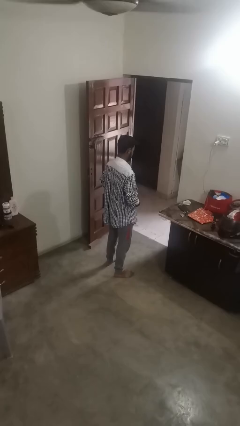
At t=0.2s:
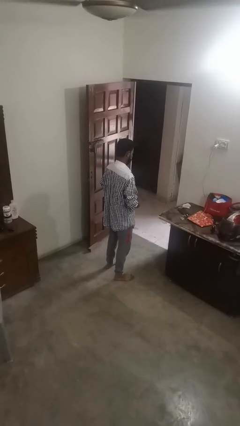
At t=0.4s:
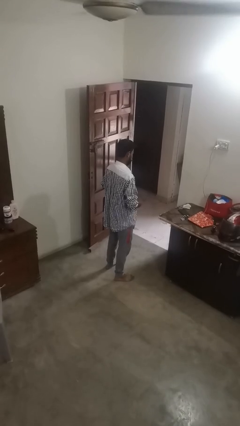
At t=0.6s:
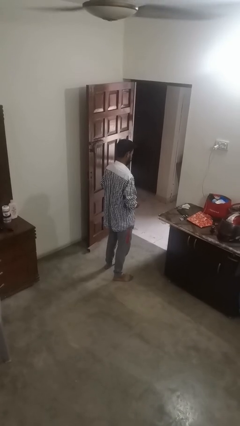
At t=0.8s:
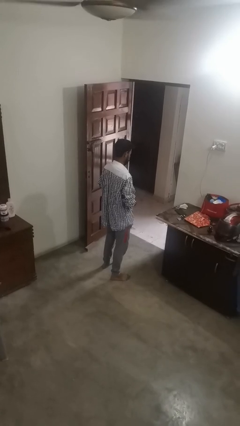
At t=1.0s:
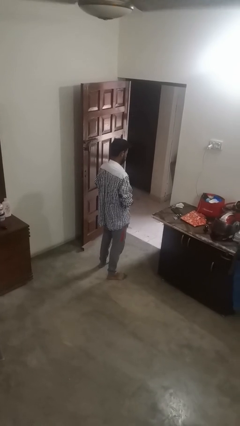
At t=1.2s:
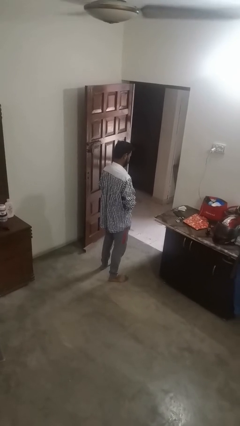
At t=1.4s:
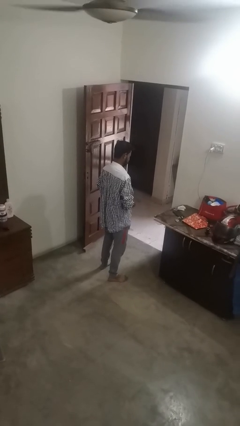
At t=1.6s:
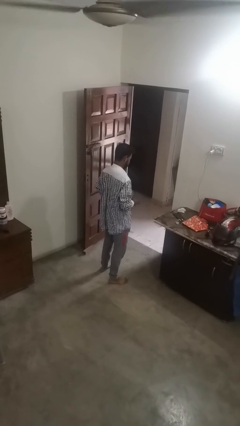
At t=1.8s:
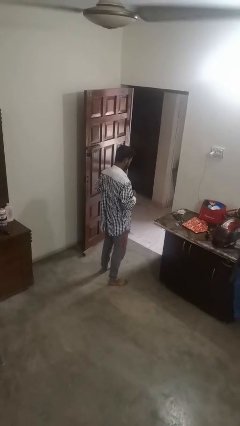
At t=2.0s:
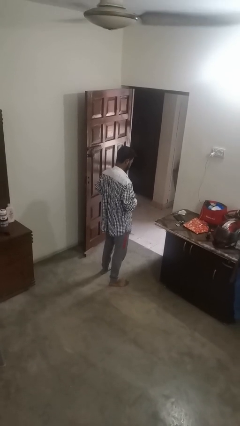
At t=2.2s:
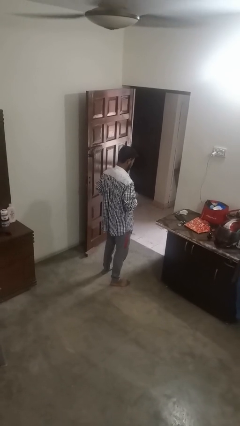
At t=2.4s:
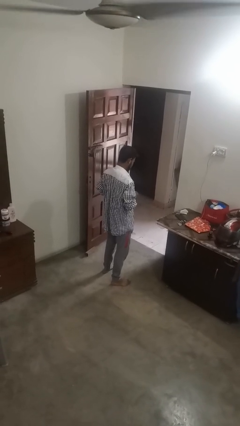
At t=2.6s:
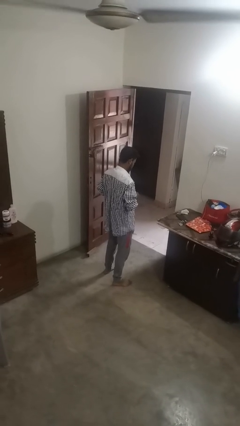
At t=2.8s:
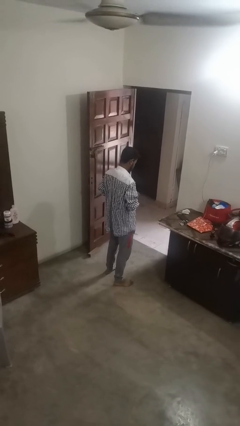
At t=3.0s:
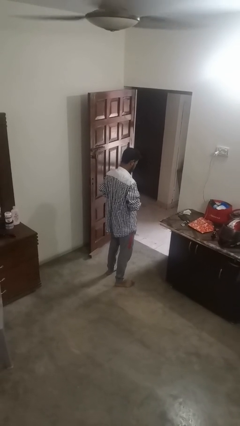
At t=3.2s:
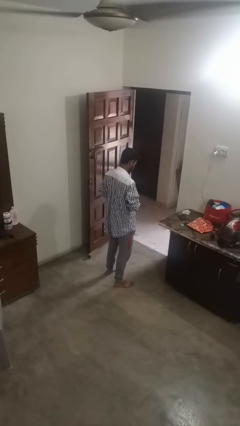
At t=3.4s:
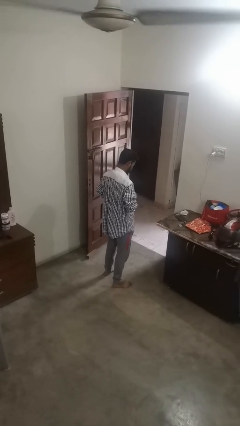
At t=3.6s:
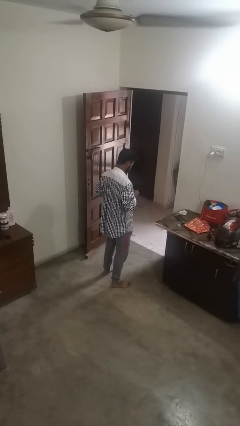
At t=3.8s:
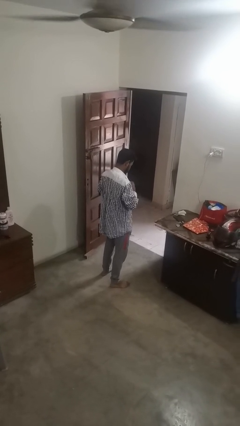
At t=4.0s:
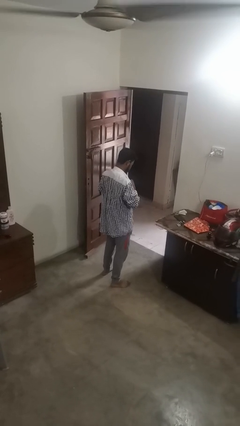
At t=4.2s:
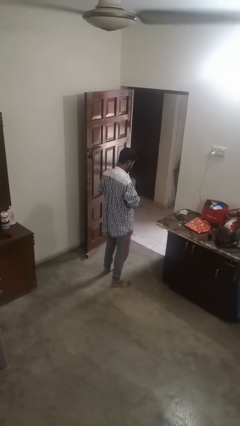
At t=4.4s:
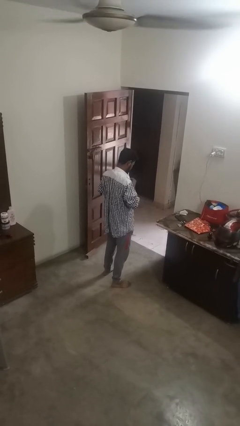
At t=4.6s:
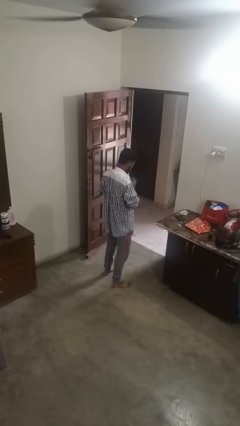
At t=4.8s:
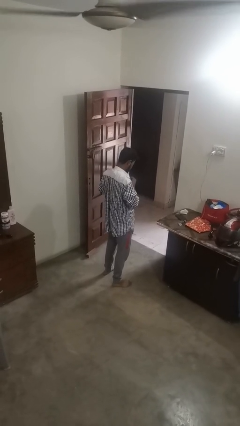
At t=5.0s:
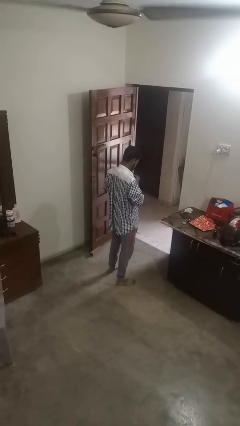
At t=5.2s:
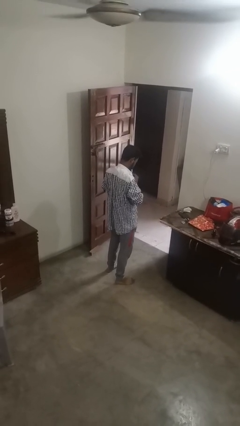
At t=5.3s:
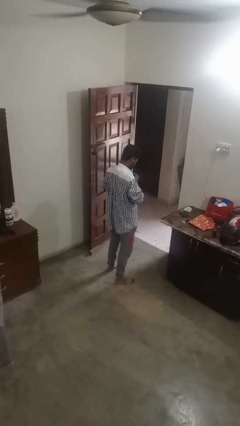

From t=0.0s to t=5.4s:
person buttons shirt

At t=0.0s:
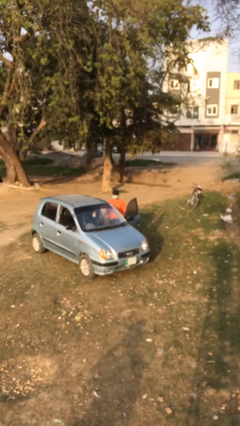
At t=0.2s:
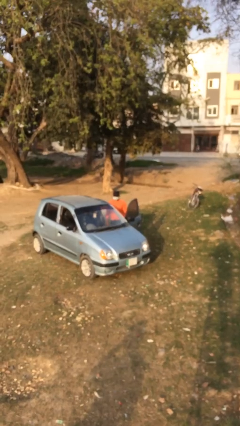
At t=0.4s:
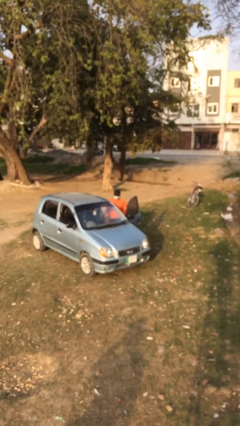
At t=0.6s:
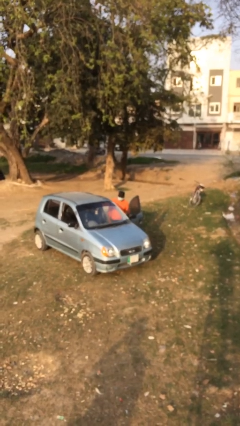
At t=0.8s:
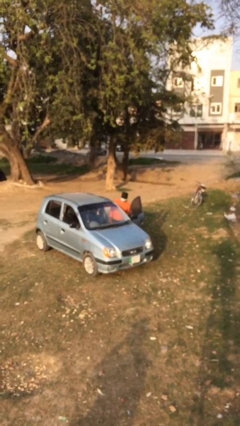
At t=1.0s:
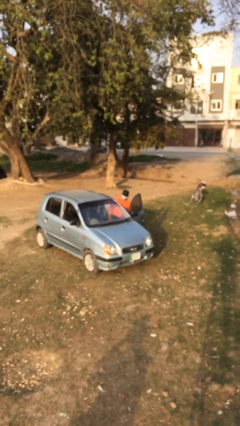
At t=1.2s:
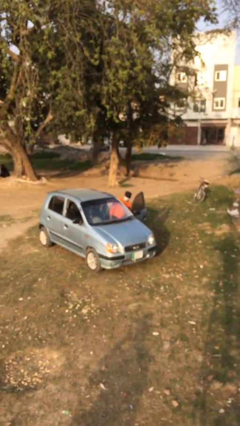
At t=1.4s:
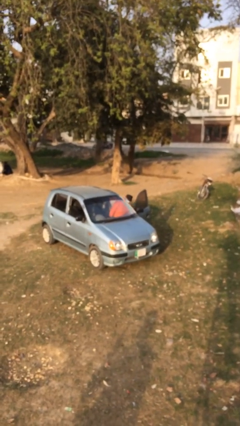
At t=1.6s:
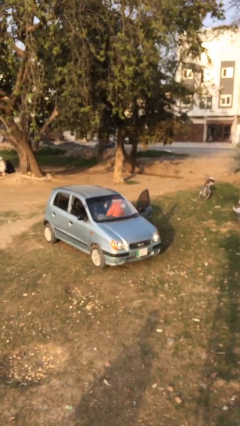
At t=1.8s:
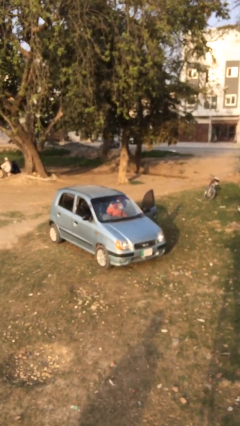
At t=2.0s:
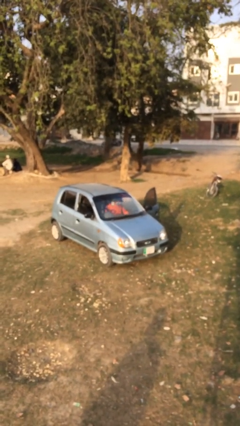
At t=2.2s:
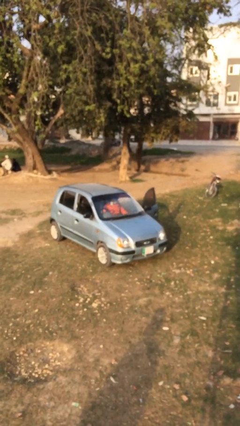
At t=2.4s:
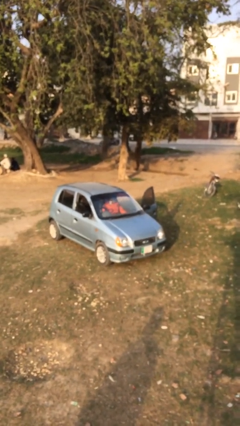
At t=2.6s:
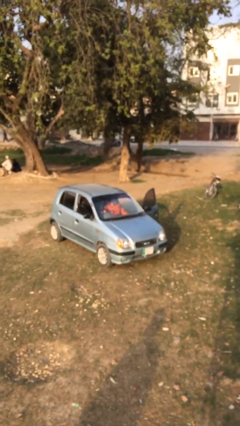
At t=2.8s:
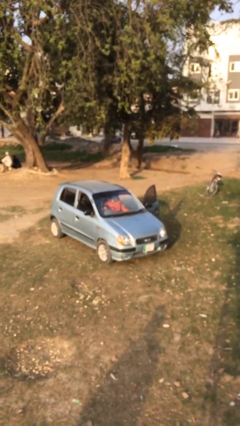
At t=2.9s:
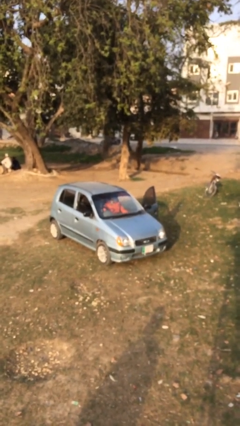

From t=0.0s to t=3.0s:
person enters car

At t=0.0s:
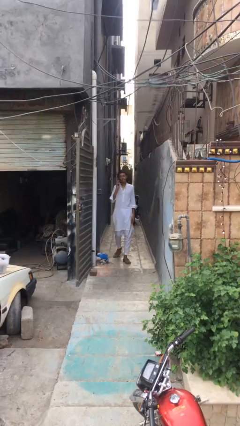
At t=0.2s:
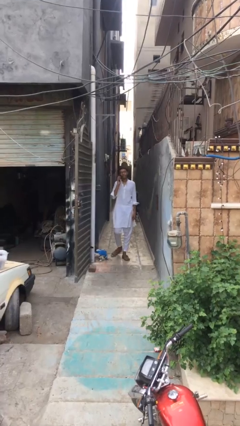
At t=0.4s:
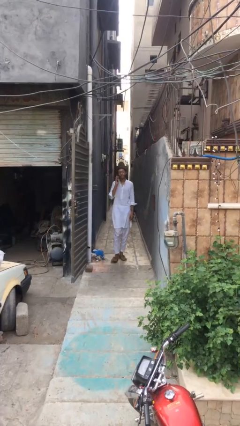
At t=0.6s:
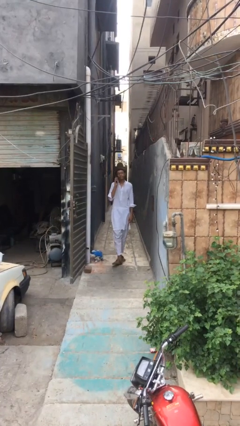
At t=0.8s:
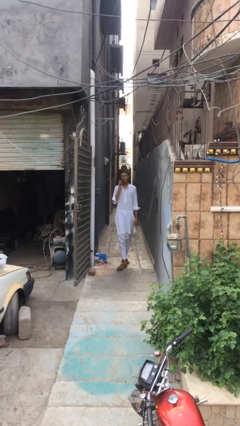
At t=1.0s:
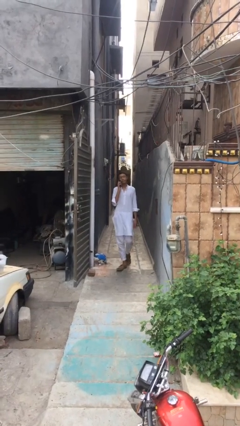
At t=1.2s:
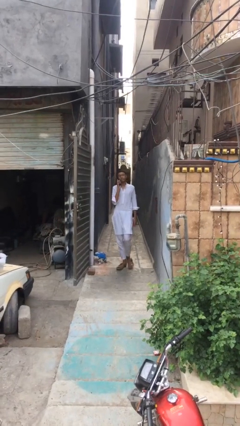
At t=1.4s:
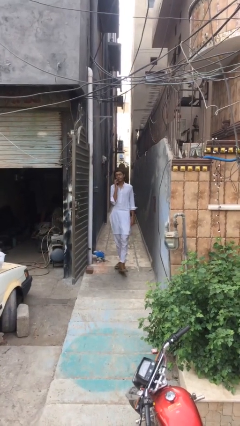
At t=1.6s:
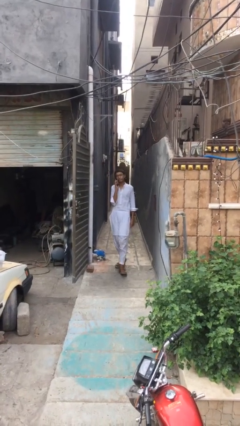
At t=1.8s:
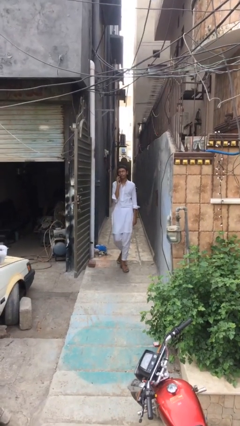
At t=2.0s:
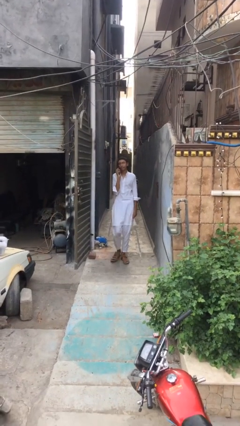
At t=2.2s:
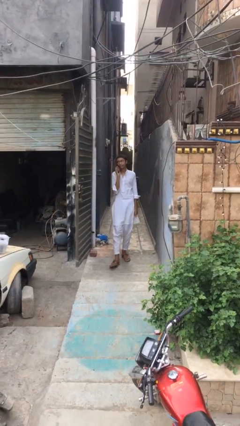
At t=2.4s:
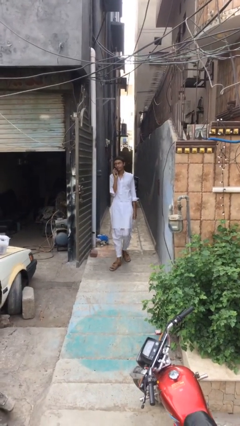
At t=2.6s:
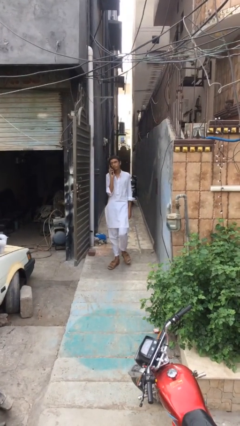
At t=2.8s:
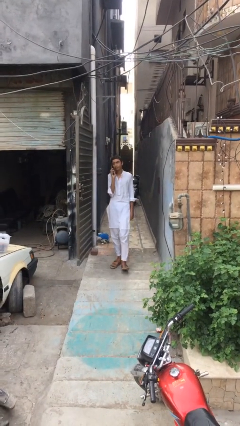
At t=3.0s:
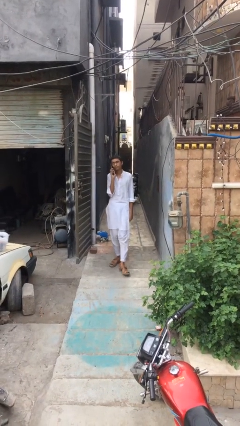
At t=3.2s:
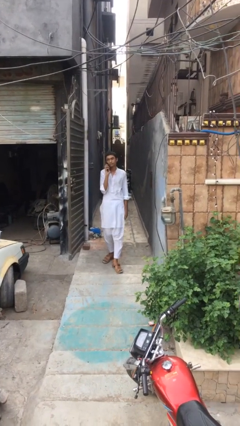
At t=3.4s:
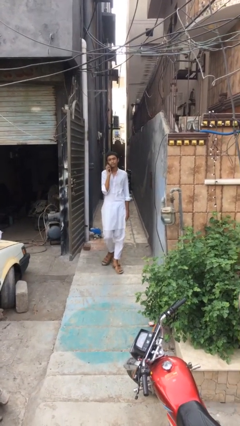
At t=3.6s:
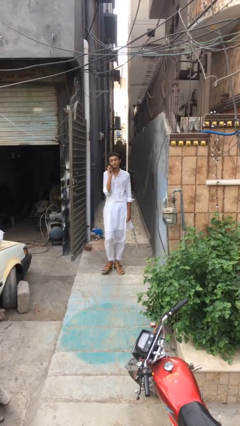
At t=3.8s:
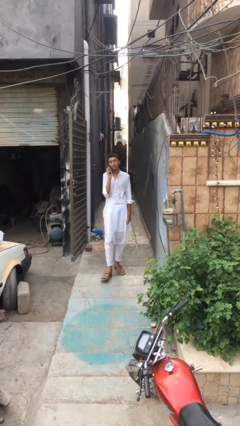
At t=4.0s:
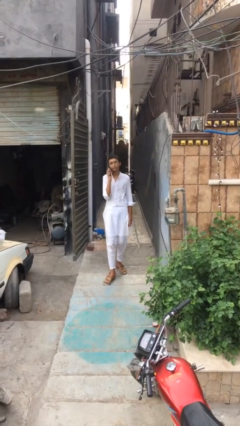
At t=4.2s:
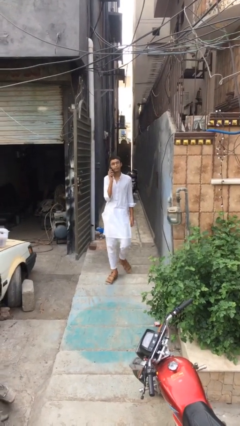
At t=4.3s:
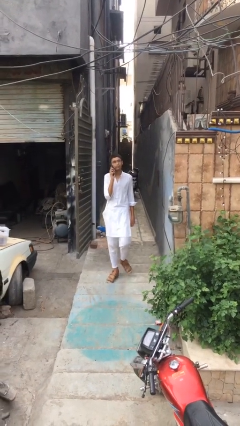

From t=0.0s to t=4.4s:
person enters scene through structure

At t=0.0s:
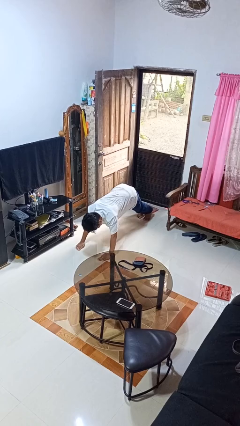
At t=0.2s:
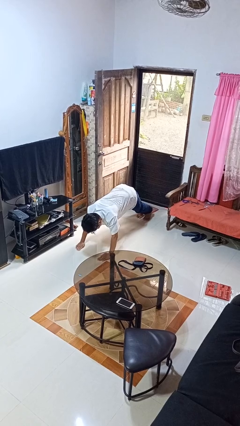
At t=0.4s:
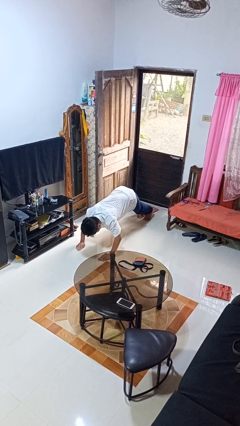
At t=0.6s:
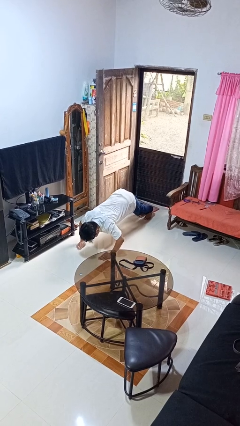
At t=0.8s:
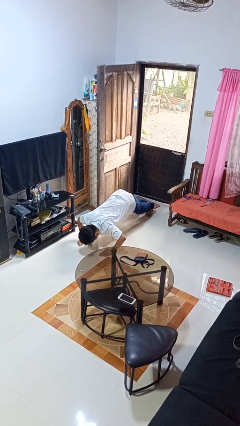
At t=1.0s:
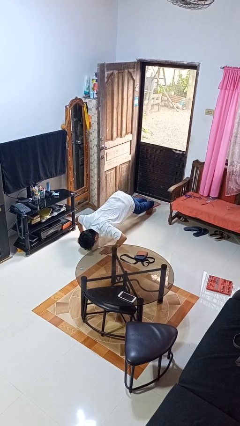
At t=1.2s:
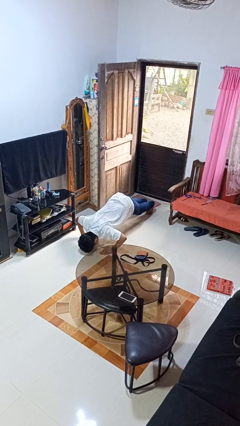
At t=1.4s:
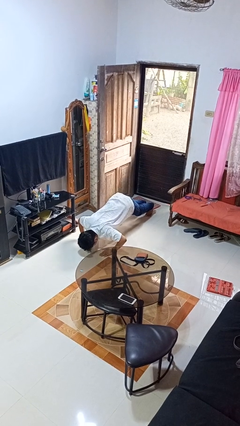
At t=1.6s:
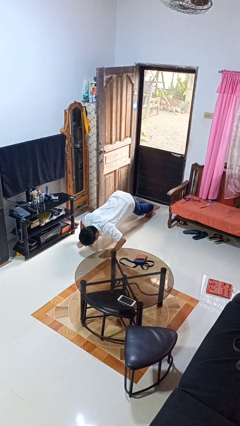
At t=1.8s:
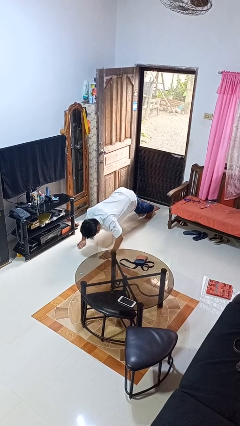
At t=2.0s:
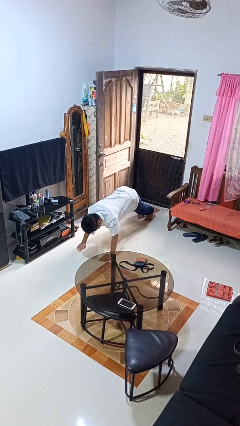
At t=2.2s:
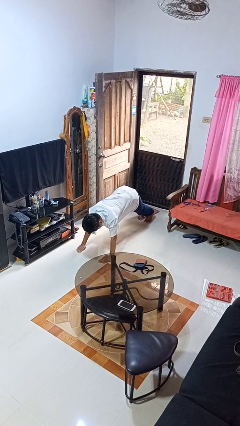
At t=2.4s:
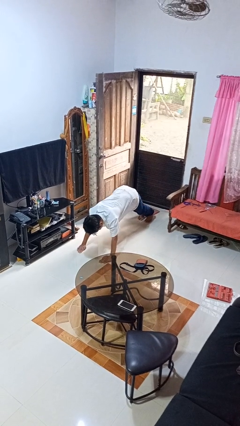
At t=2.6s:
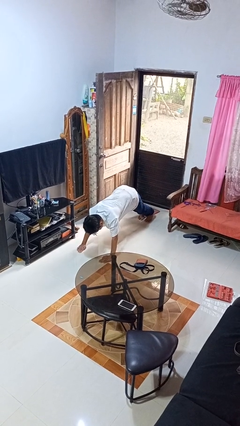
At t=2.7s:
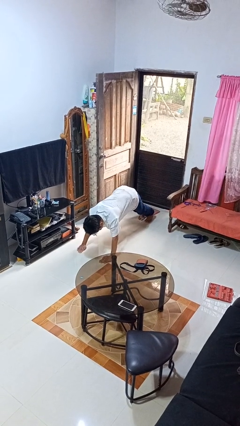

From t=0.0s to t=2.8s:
person exercises with pushup

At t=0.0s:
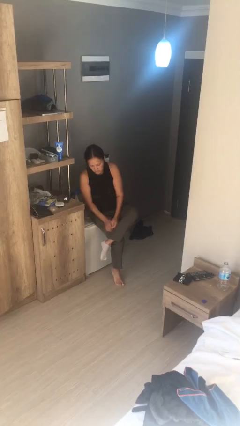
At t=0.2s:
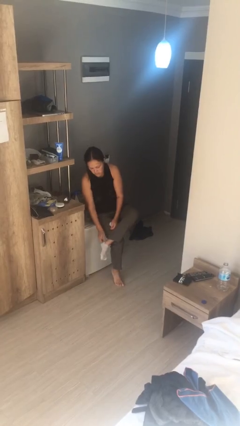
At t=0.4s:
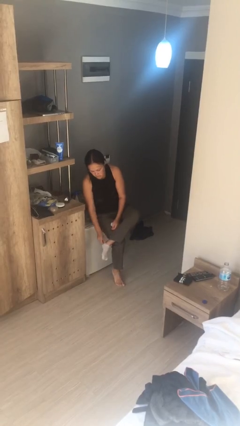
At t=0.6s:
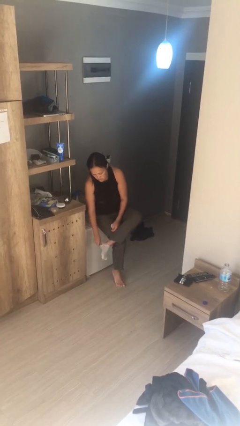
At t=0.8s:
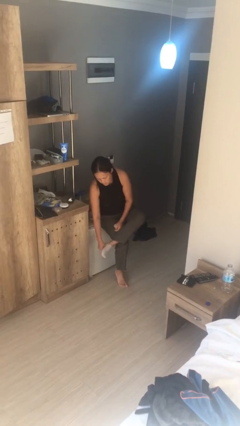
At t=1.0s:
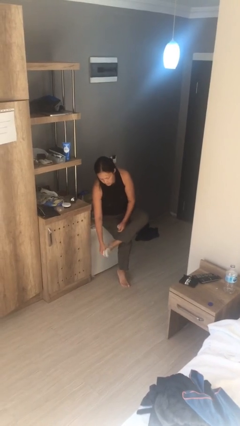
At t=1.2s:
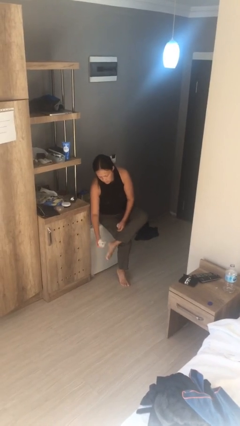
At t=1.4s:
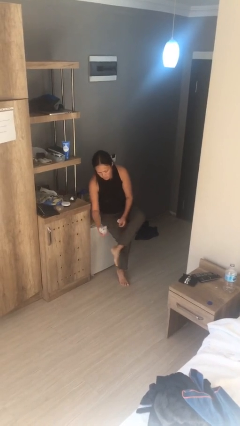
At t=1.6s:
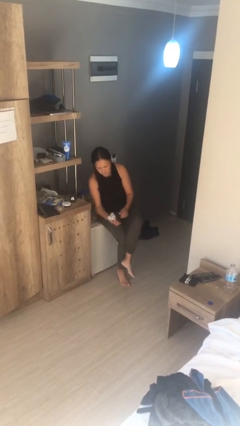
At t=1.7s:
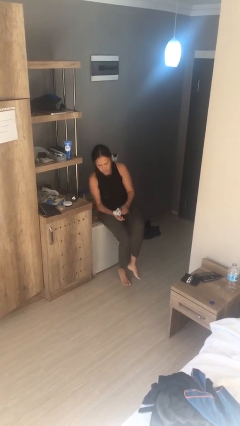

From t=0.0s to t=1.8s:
person takes off socks
